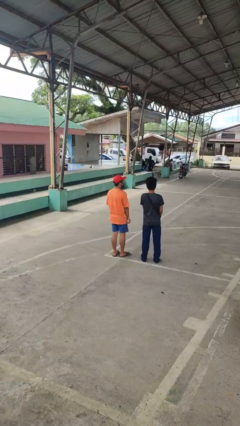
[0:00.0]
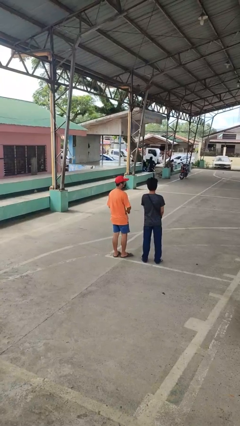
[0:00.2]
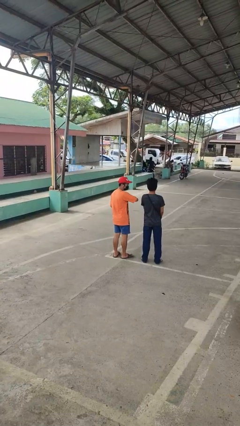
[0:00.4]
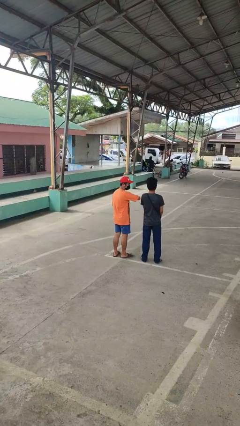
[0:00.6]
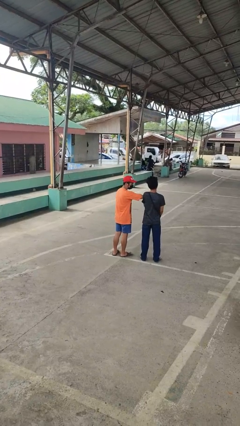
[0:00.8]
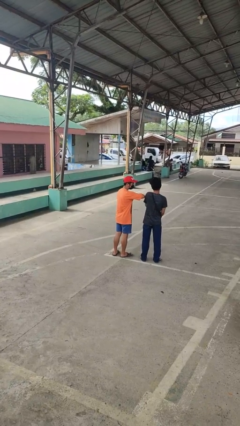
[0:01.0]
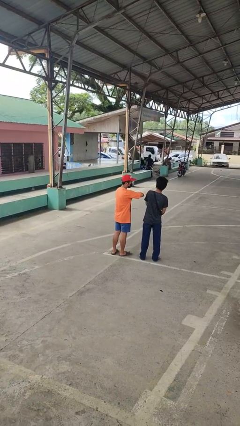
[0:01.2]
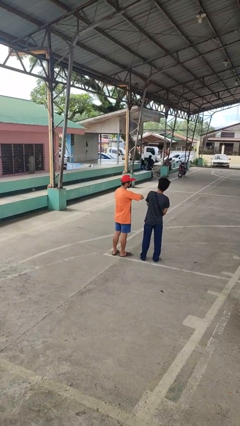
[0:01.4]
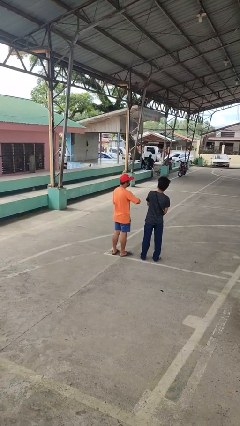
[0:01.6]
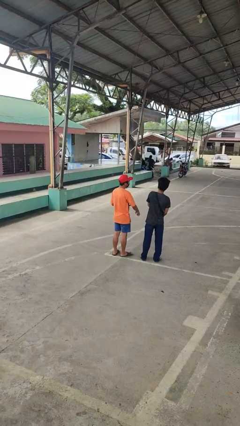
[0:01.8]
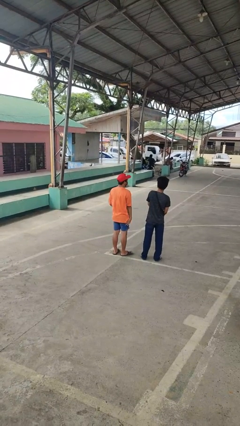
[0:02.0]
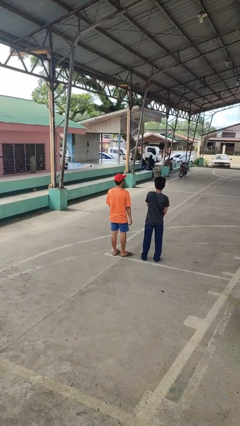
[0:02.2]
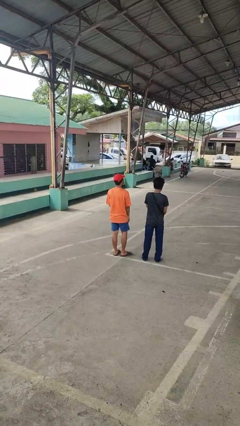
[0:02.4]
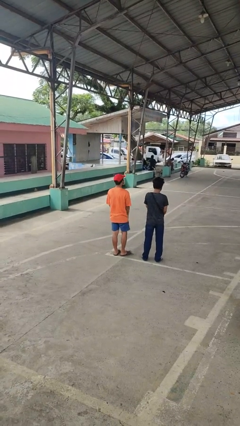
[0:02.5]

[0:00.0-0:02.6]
person nudges person with elbow

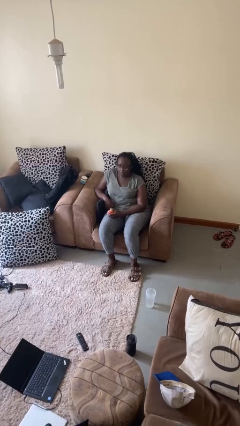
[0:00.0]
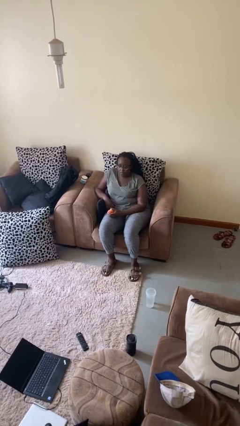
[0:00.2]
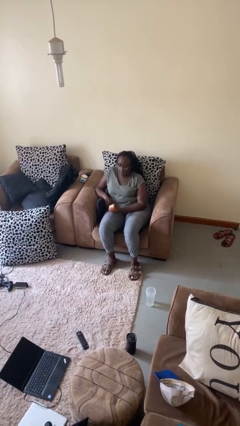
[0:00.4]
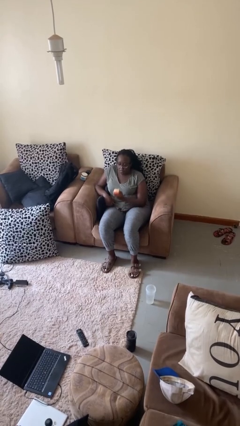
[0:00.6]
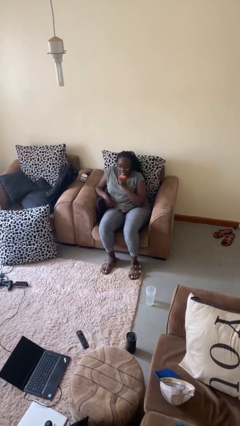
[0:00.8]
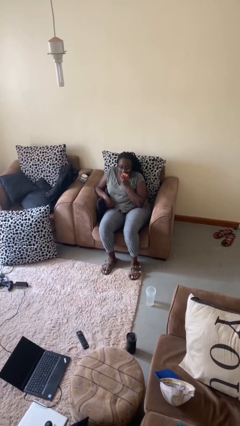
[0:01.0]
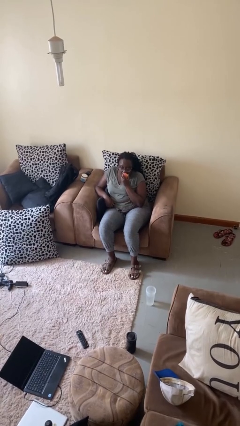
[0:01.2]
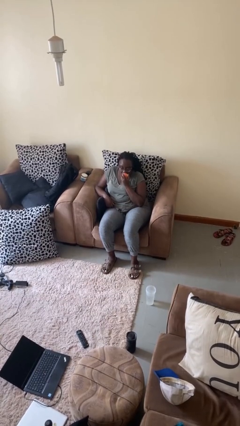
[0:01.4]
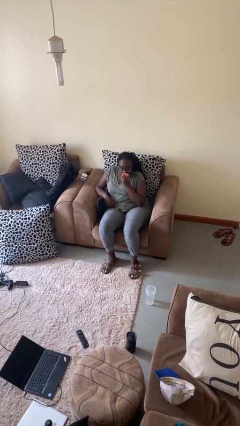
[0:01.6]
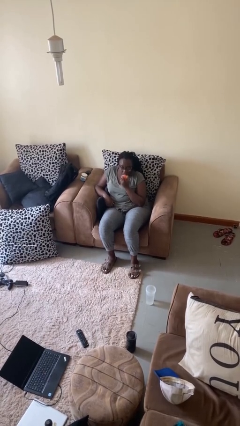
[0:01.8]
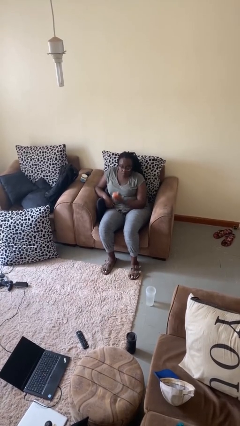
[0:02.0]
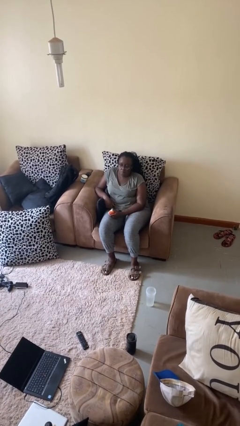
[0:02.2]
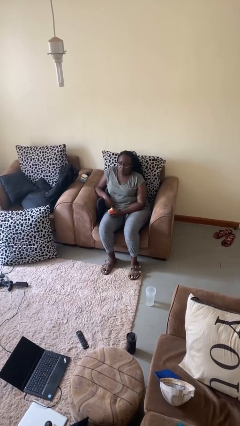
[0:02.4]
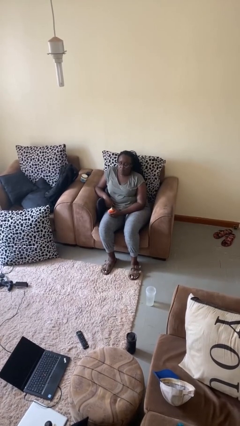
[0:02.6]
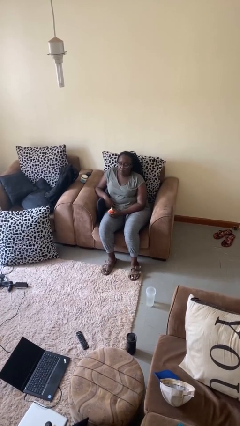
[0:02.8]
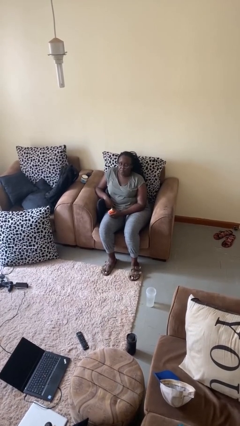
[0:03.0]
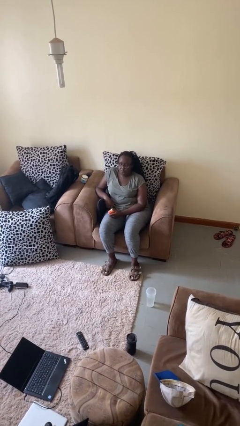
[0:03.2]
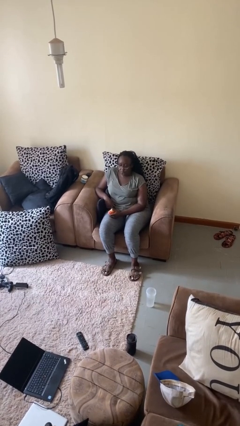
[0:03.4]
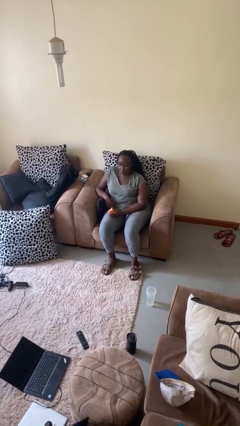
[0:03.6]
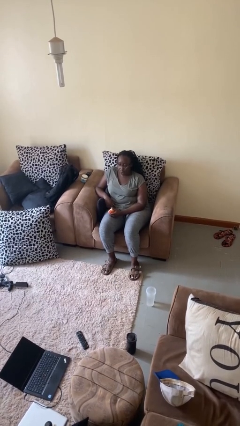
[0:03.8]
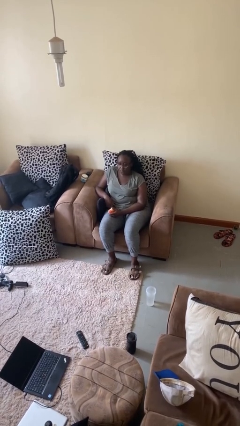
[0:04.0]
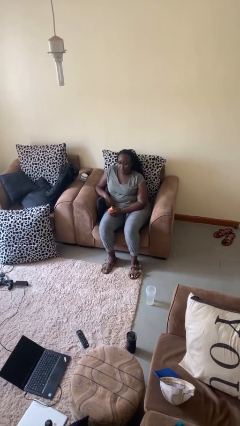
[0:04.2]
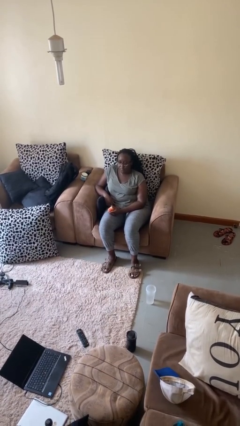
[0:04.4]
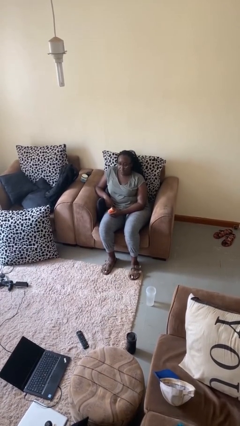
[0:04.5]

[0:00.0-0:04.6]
person eats apple

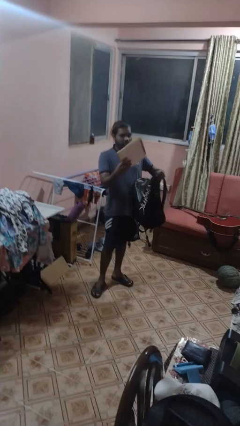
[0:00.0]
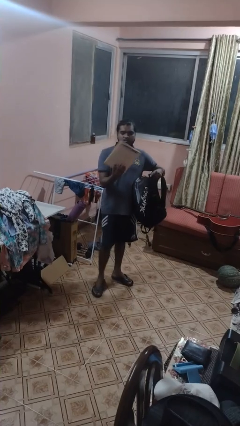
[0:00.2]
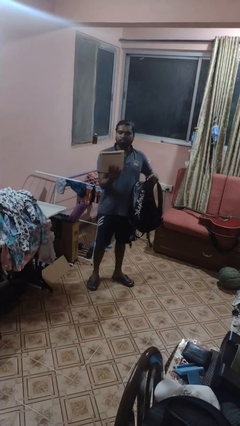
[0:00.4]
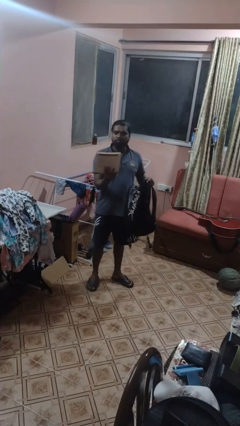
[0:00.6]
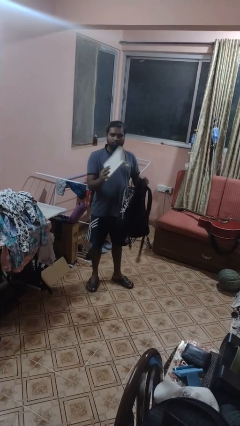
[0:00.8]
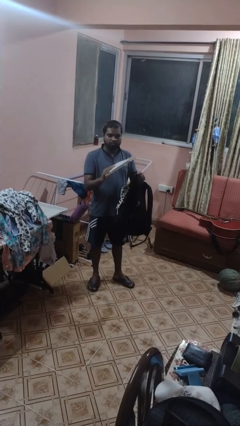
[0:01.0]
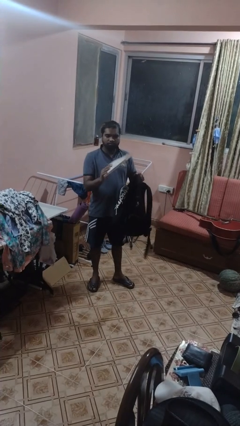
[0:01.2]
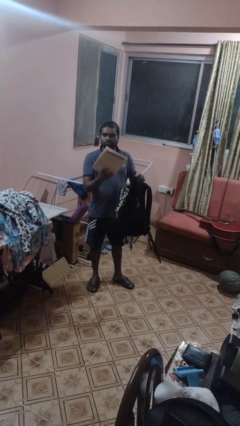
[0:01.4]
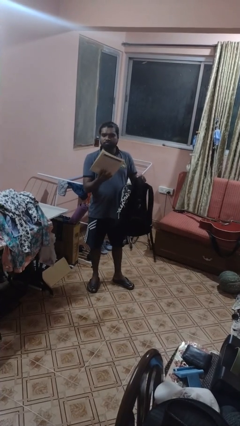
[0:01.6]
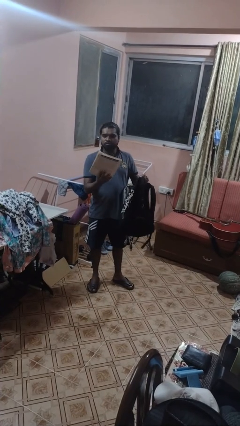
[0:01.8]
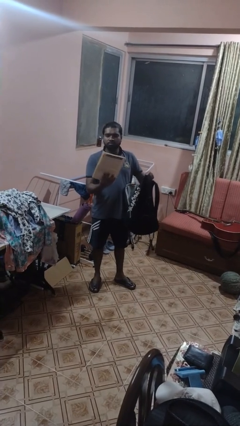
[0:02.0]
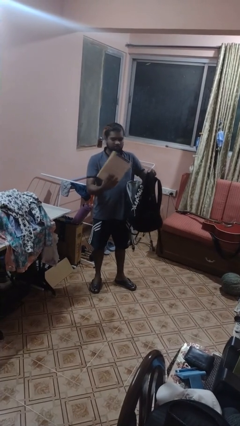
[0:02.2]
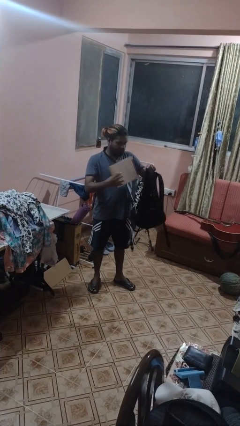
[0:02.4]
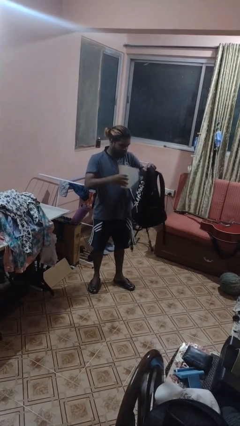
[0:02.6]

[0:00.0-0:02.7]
person takes object from backpack

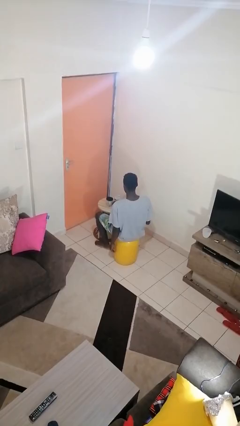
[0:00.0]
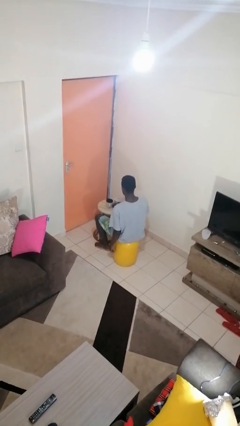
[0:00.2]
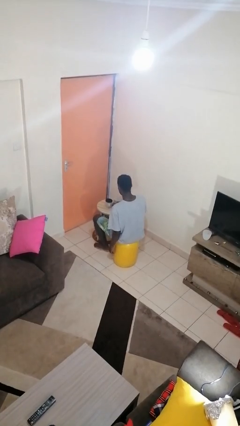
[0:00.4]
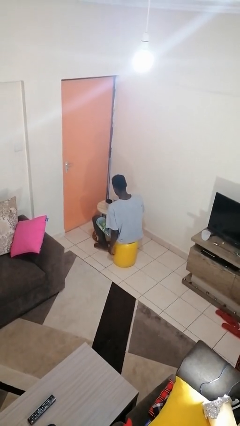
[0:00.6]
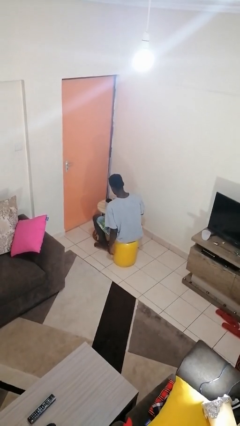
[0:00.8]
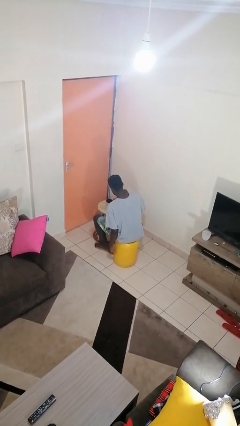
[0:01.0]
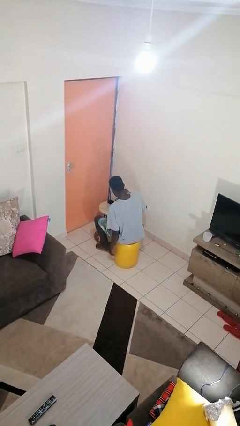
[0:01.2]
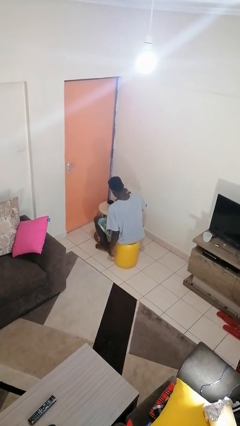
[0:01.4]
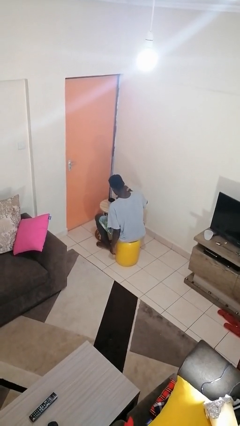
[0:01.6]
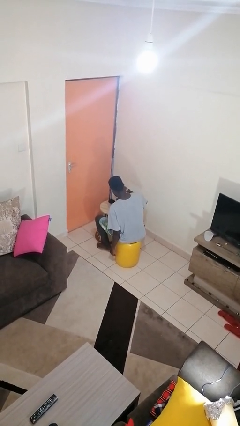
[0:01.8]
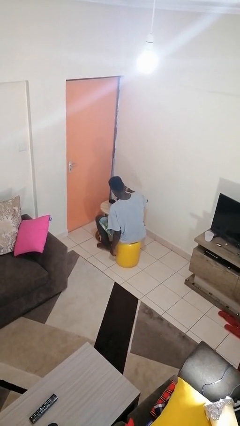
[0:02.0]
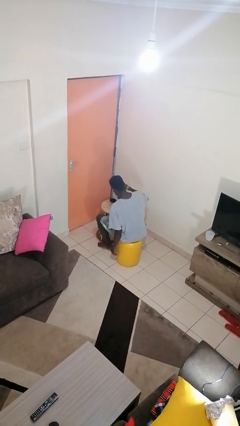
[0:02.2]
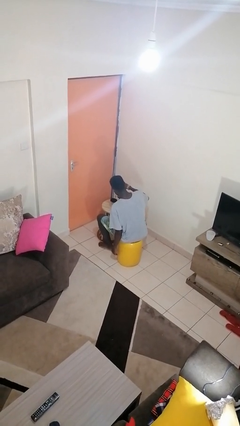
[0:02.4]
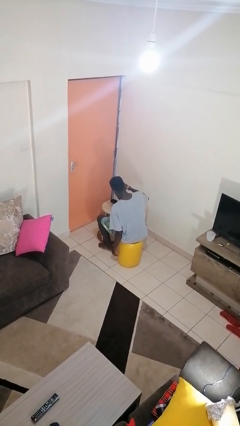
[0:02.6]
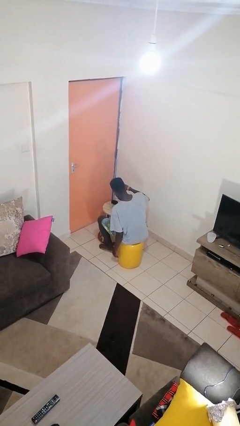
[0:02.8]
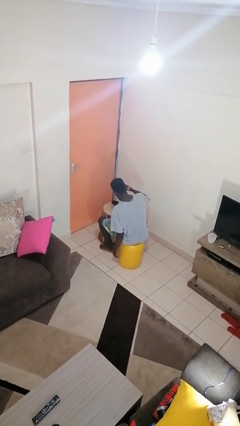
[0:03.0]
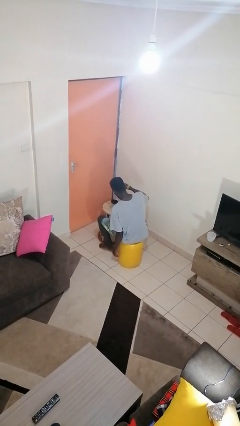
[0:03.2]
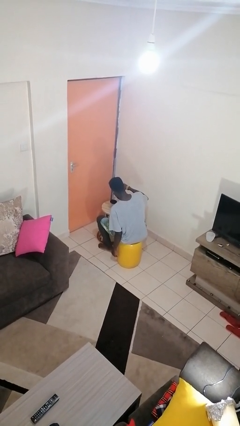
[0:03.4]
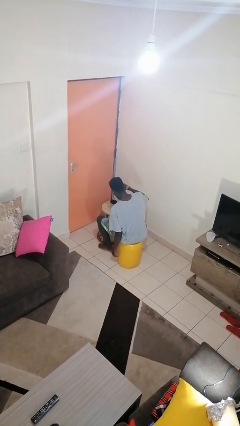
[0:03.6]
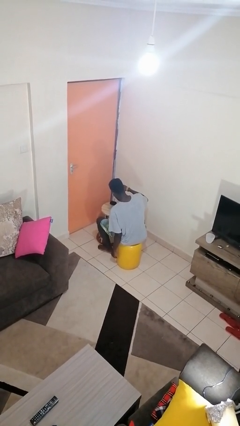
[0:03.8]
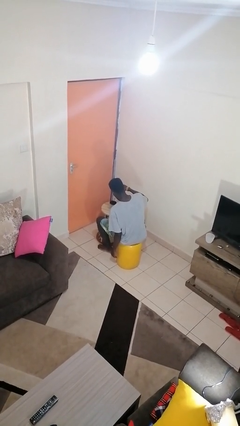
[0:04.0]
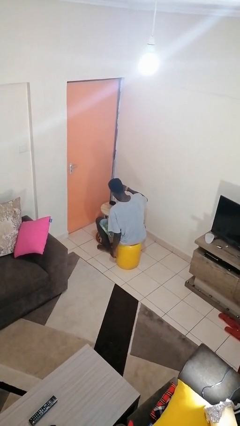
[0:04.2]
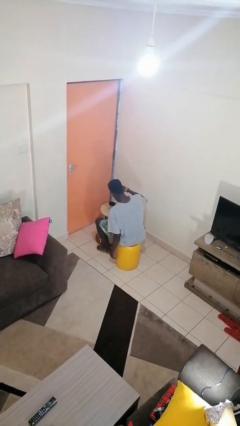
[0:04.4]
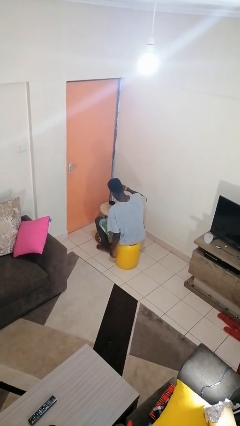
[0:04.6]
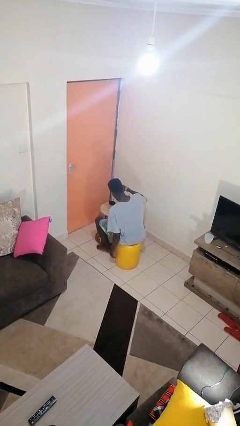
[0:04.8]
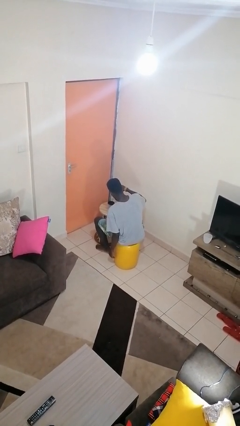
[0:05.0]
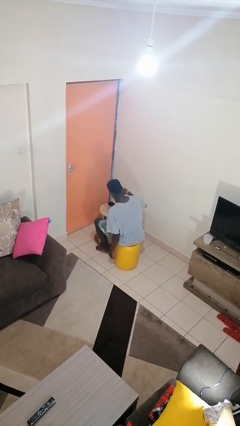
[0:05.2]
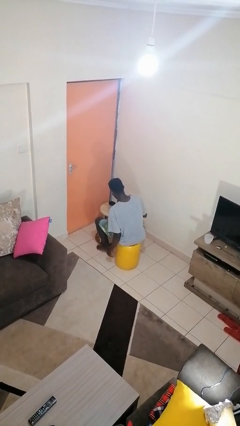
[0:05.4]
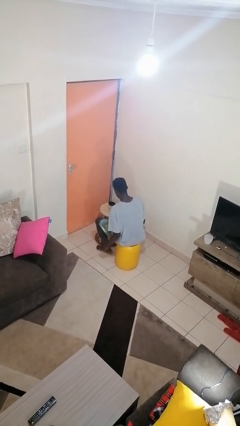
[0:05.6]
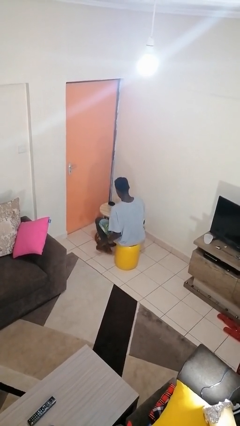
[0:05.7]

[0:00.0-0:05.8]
person pours coffee into mug

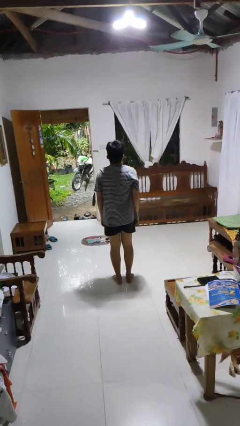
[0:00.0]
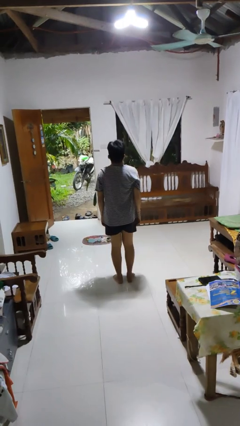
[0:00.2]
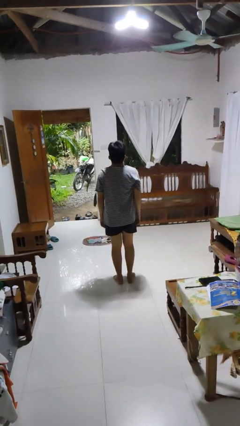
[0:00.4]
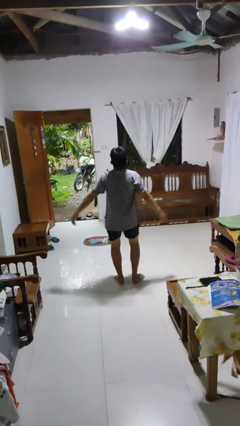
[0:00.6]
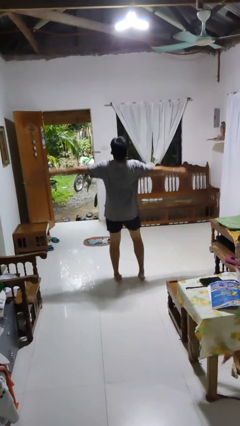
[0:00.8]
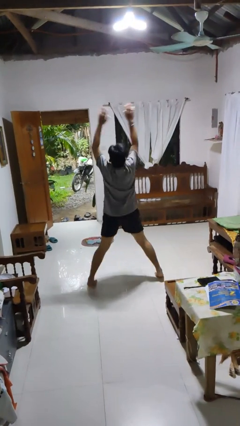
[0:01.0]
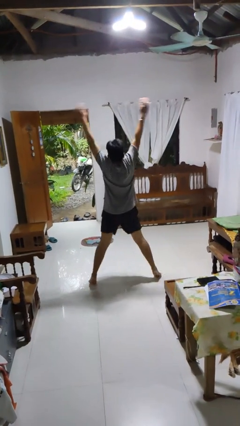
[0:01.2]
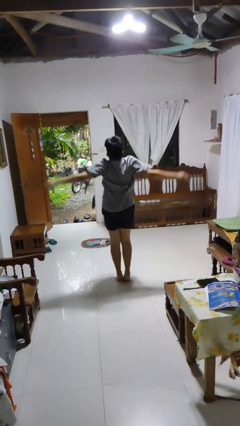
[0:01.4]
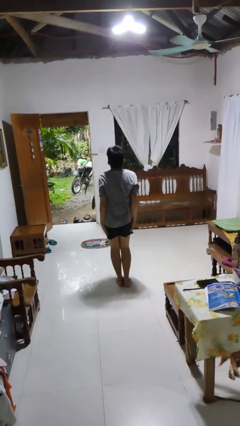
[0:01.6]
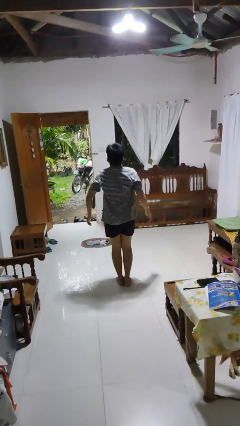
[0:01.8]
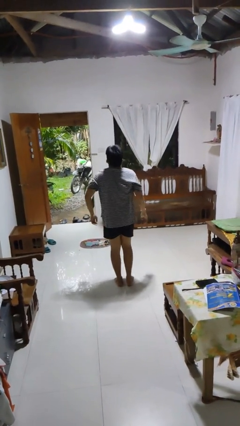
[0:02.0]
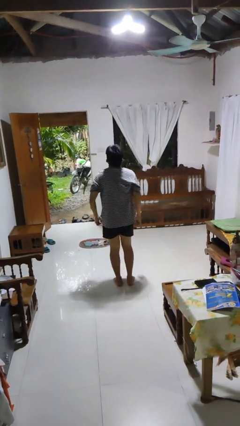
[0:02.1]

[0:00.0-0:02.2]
person exercises with jumping jacks
